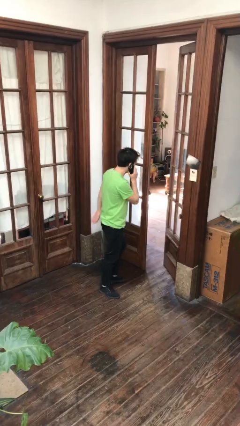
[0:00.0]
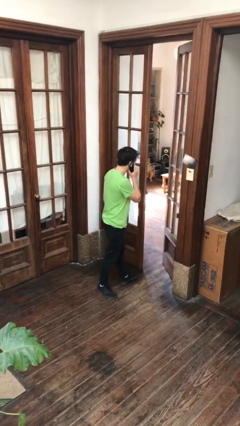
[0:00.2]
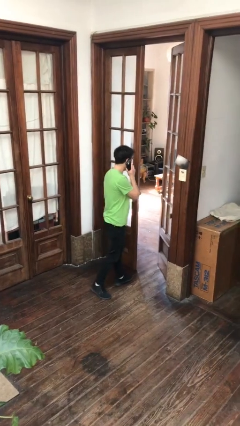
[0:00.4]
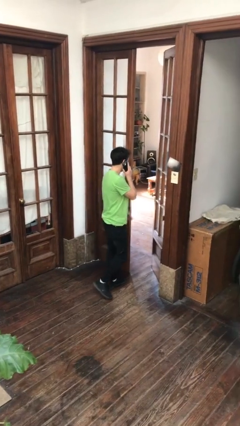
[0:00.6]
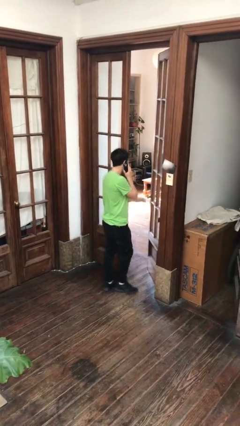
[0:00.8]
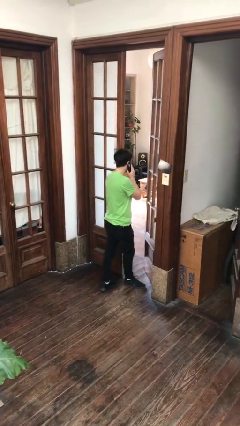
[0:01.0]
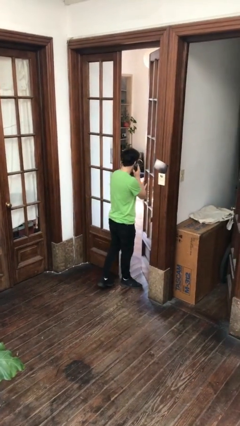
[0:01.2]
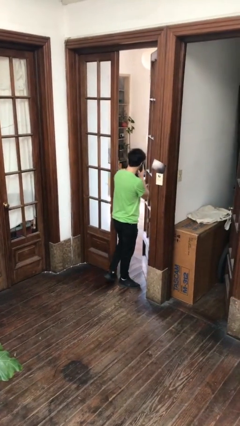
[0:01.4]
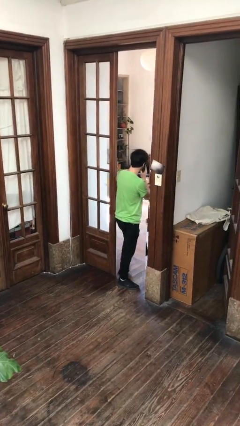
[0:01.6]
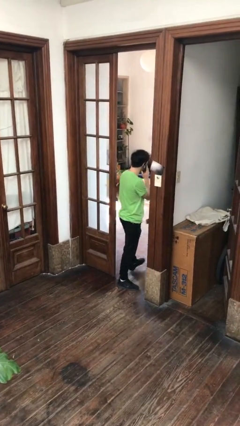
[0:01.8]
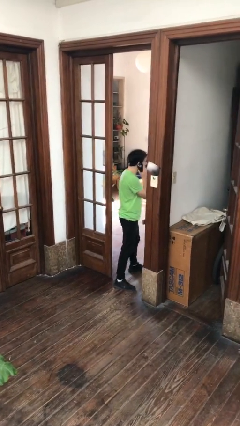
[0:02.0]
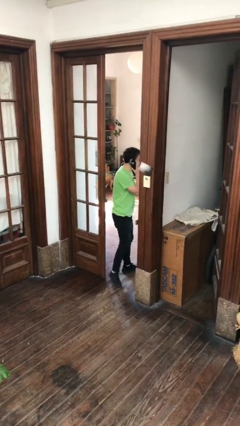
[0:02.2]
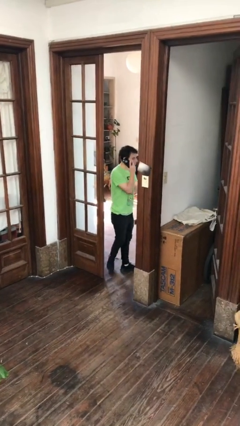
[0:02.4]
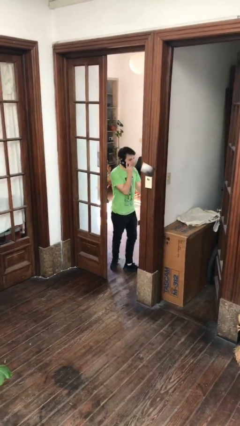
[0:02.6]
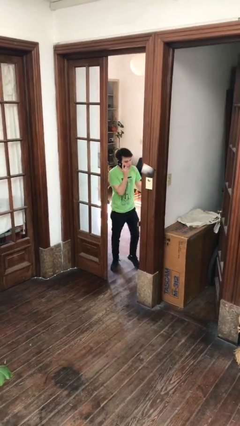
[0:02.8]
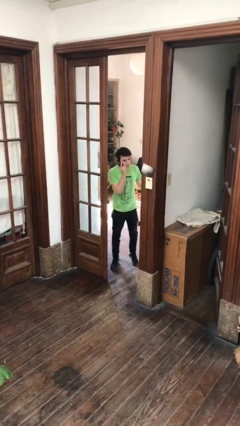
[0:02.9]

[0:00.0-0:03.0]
person exits scene through structure

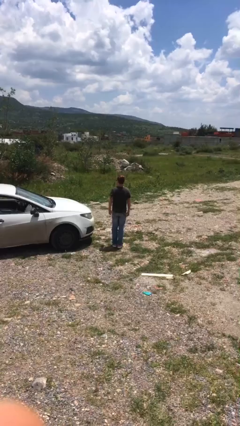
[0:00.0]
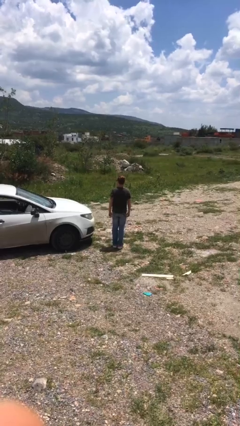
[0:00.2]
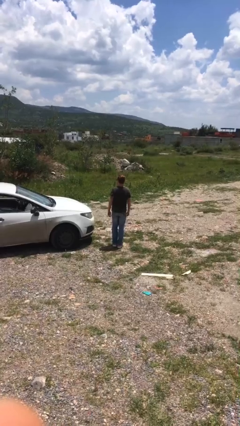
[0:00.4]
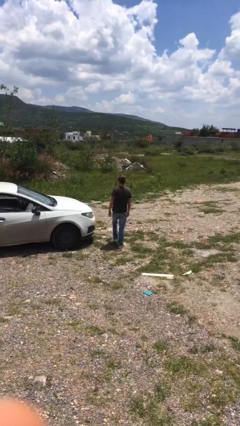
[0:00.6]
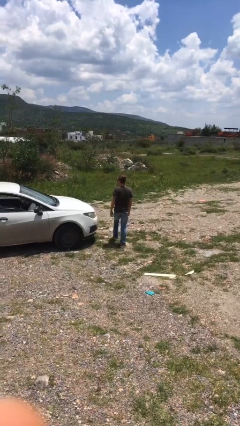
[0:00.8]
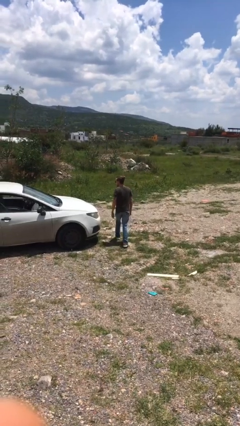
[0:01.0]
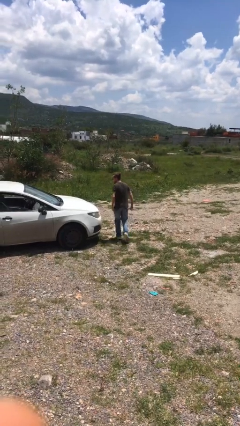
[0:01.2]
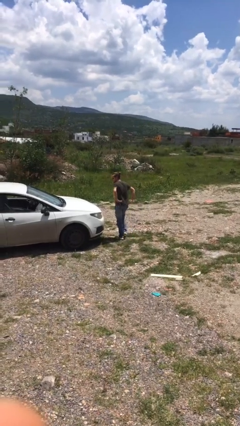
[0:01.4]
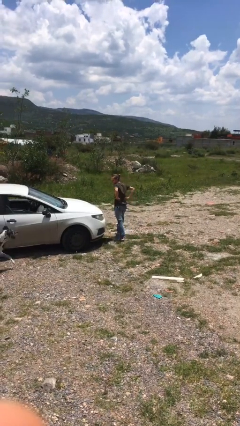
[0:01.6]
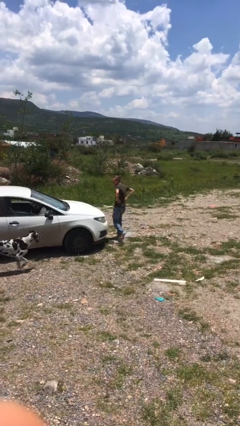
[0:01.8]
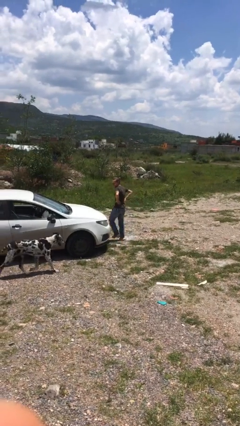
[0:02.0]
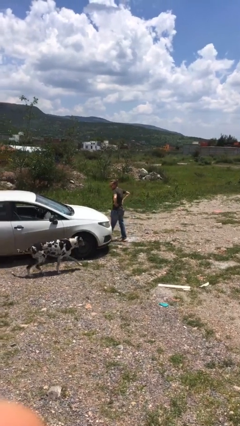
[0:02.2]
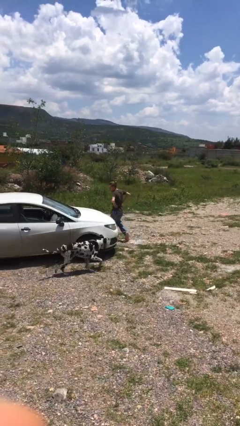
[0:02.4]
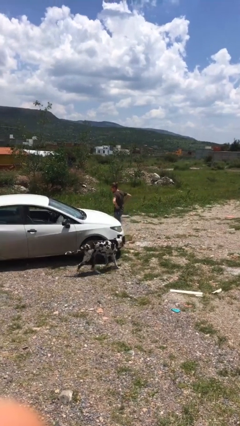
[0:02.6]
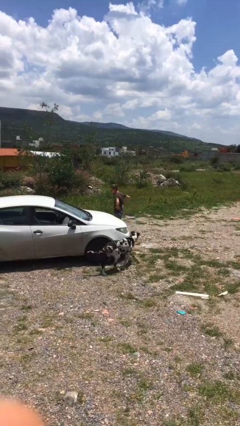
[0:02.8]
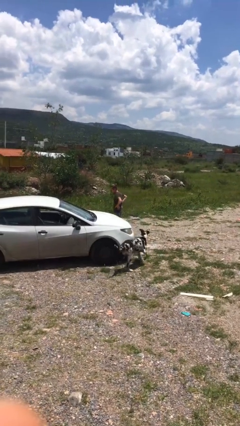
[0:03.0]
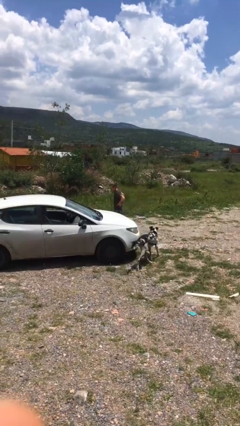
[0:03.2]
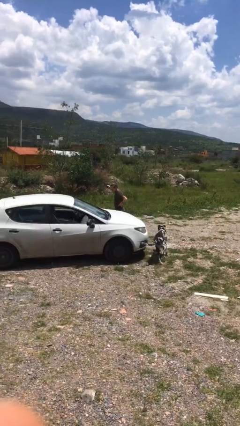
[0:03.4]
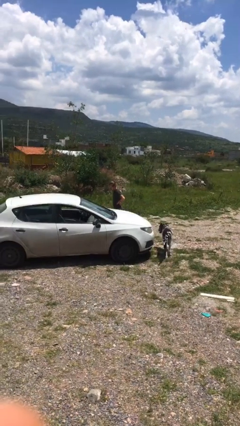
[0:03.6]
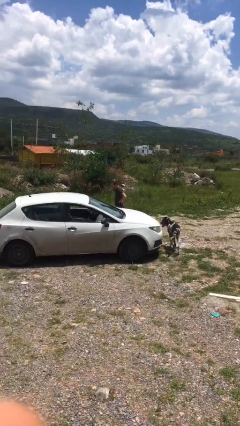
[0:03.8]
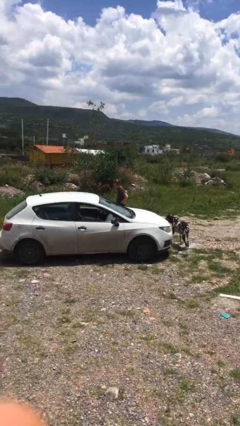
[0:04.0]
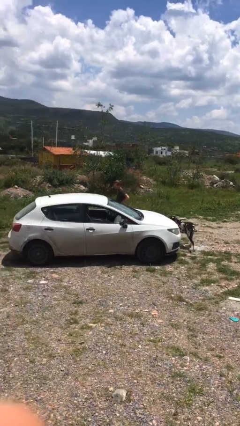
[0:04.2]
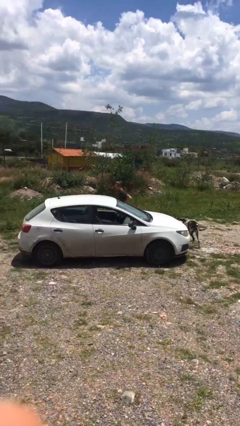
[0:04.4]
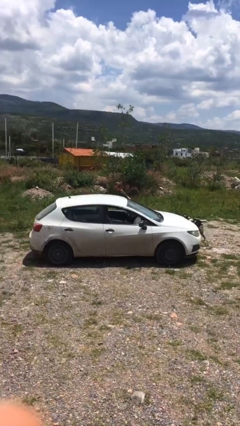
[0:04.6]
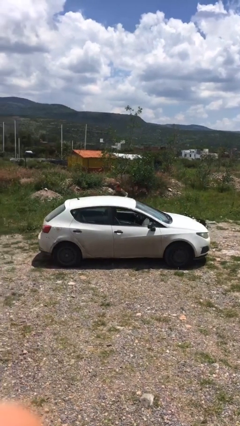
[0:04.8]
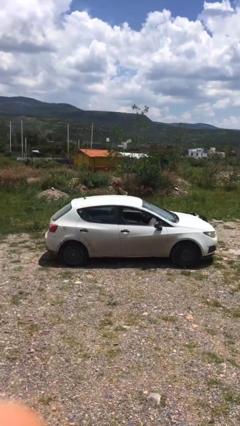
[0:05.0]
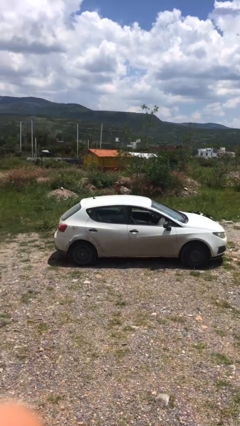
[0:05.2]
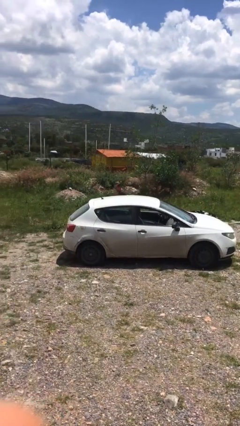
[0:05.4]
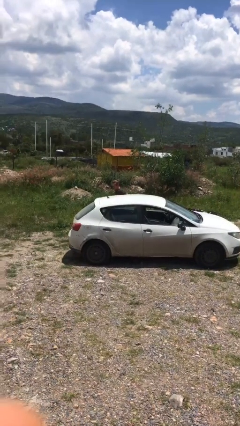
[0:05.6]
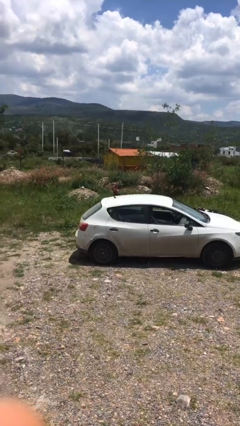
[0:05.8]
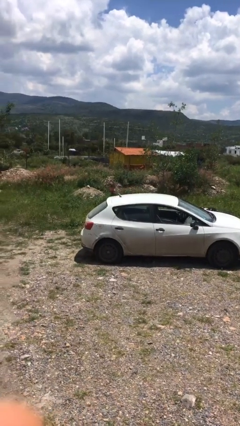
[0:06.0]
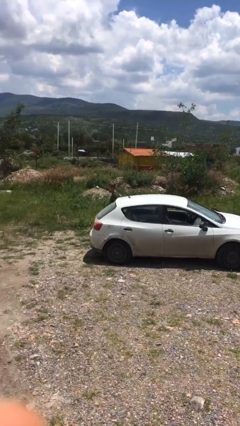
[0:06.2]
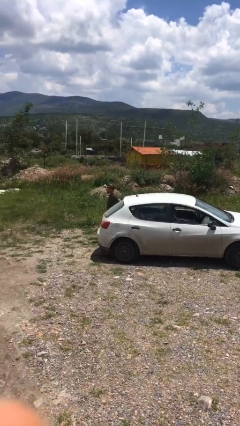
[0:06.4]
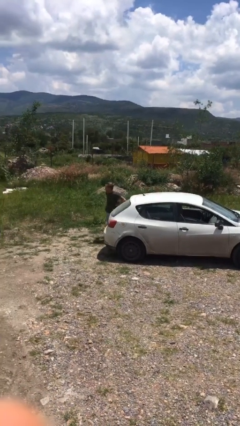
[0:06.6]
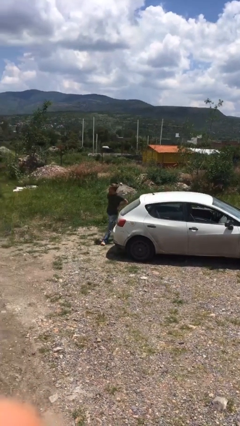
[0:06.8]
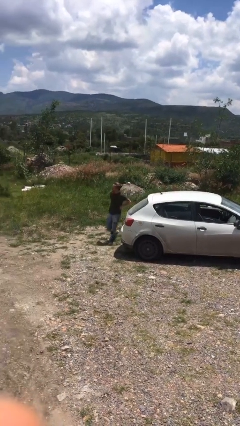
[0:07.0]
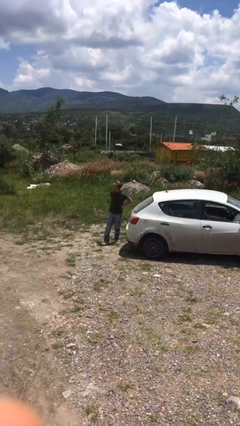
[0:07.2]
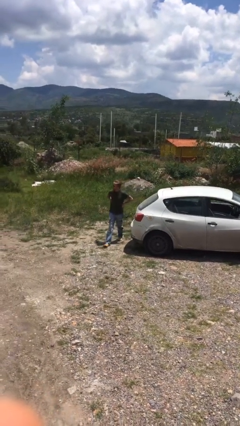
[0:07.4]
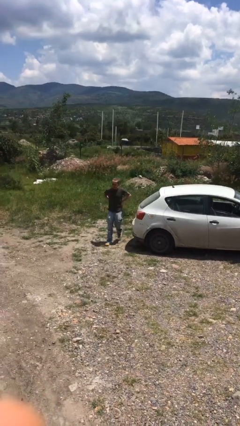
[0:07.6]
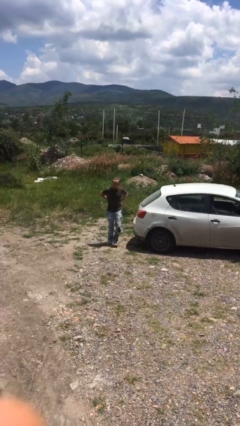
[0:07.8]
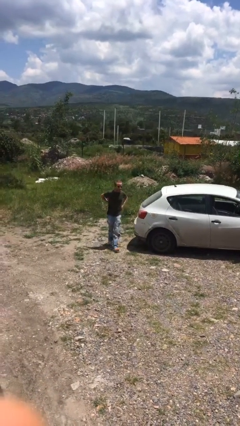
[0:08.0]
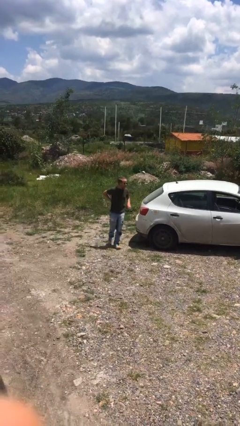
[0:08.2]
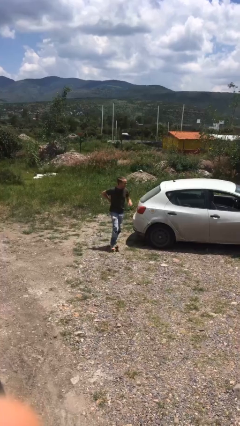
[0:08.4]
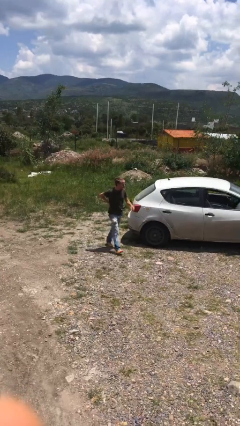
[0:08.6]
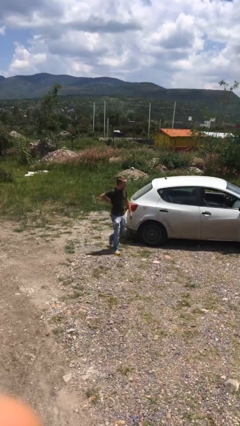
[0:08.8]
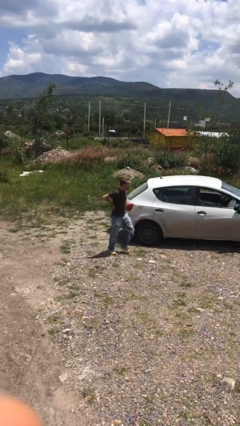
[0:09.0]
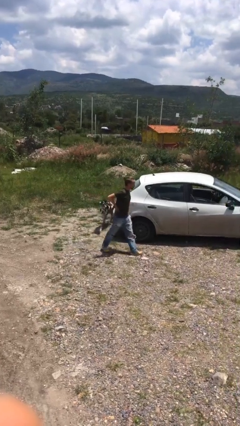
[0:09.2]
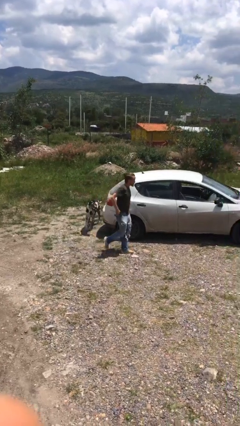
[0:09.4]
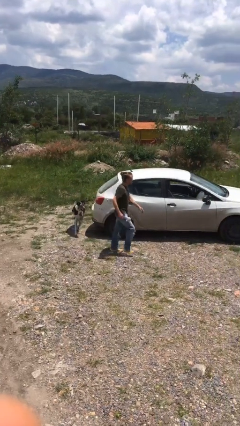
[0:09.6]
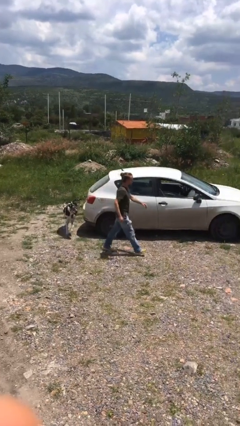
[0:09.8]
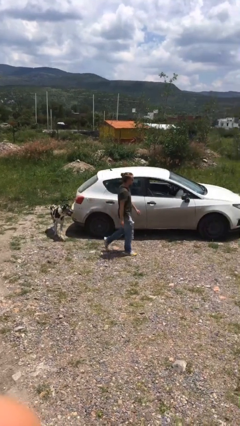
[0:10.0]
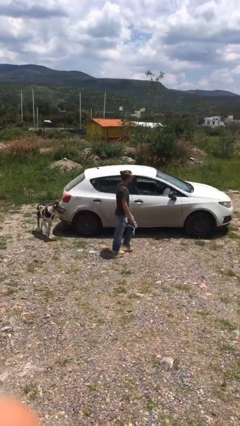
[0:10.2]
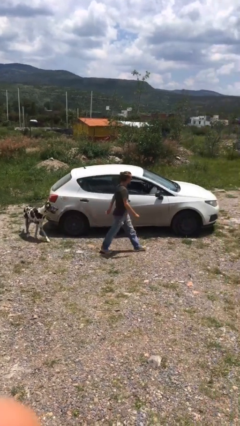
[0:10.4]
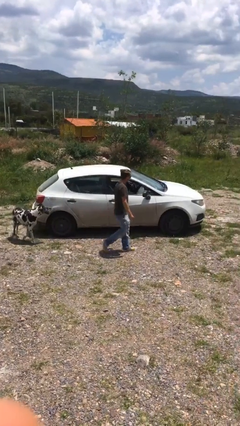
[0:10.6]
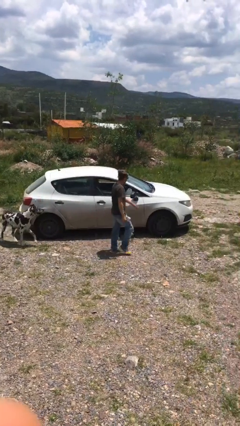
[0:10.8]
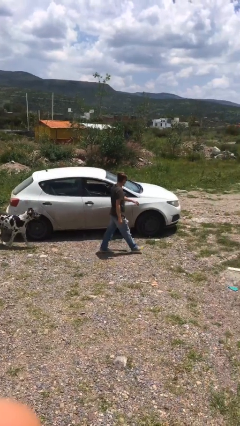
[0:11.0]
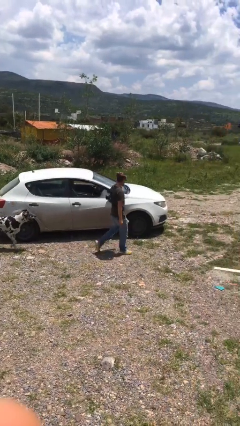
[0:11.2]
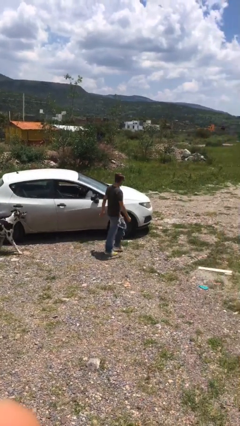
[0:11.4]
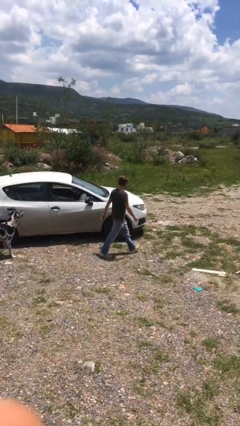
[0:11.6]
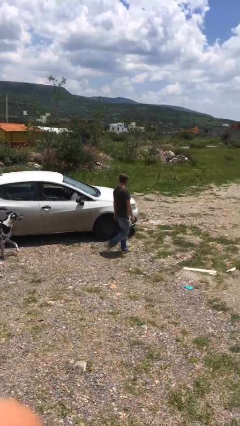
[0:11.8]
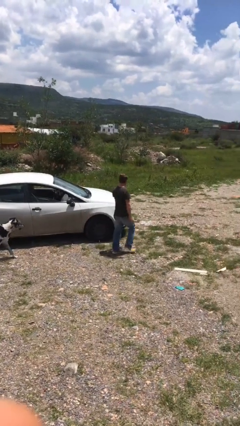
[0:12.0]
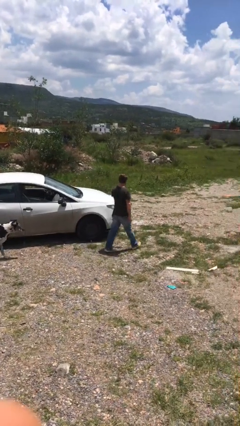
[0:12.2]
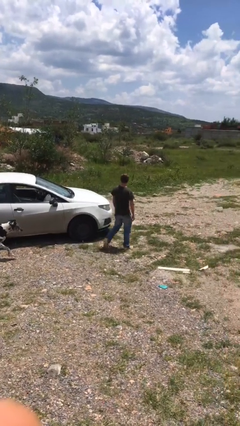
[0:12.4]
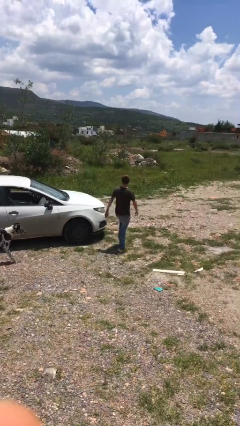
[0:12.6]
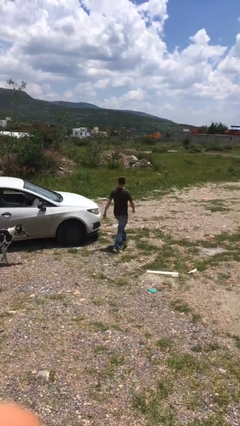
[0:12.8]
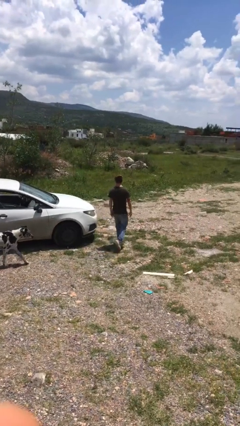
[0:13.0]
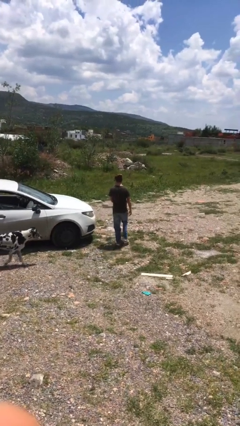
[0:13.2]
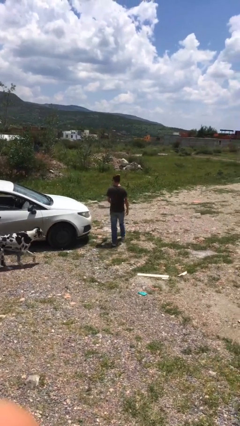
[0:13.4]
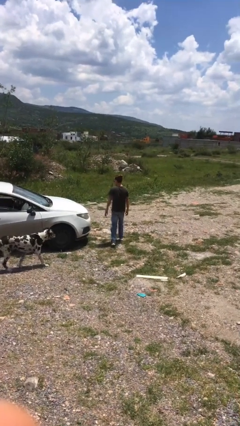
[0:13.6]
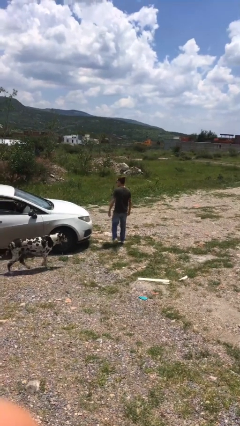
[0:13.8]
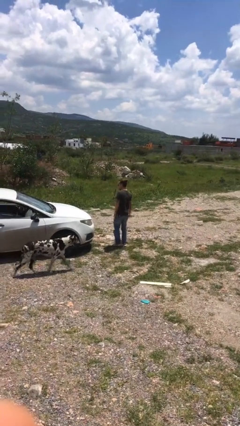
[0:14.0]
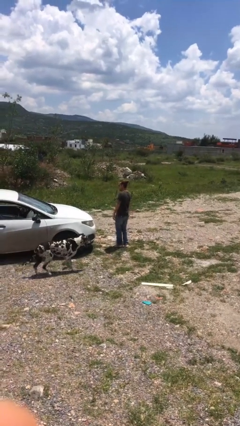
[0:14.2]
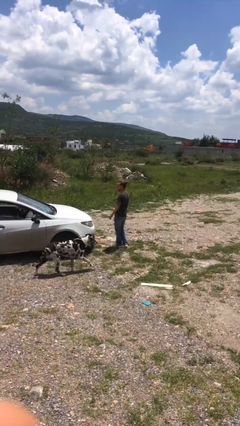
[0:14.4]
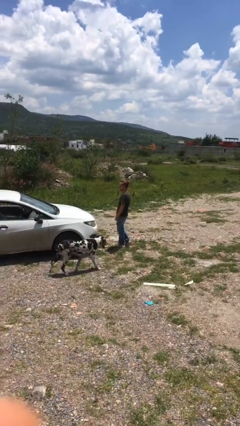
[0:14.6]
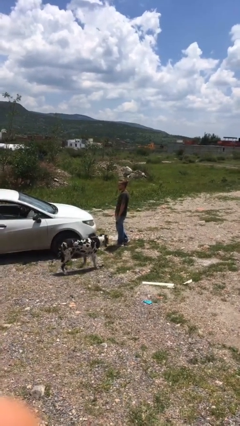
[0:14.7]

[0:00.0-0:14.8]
person walks around car

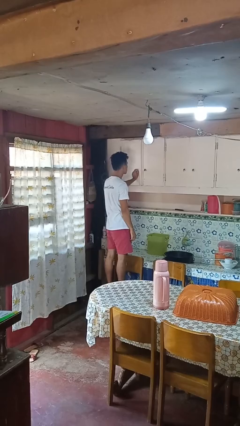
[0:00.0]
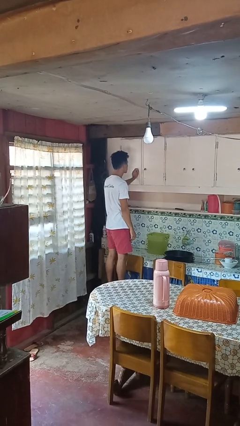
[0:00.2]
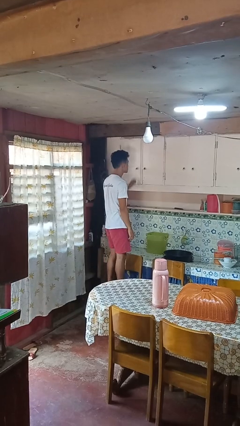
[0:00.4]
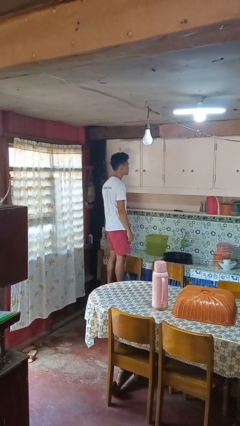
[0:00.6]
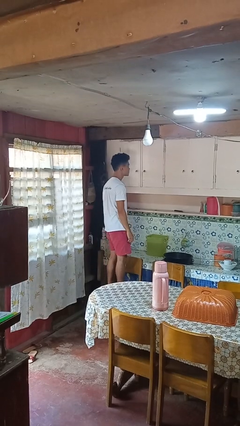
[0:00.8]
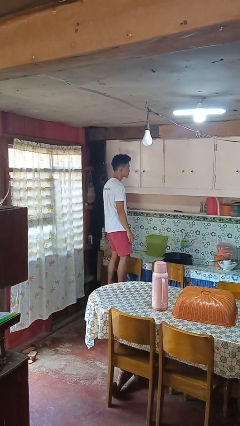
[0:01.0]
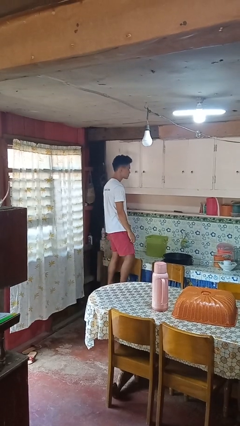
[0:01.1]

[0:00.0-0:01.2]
person closes cabinet
